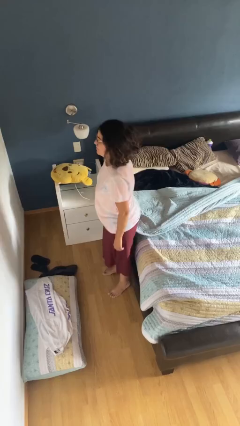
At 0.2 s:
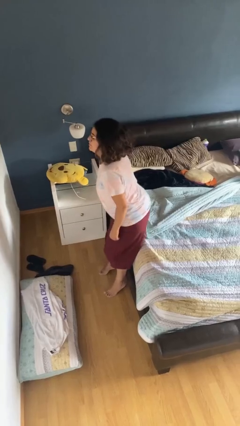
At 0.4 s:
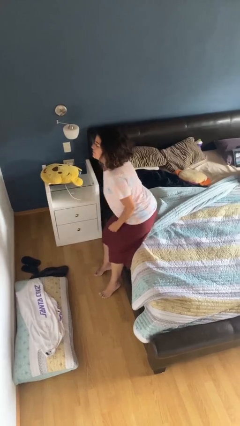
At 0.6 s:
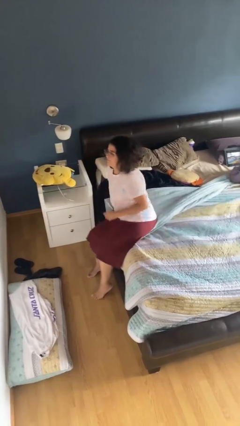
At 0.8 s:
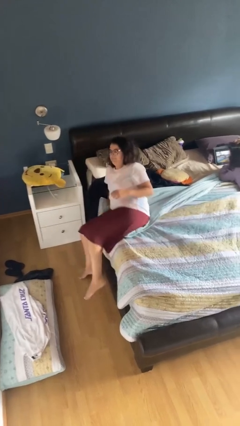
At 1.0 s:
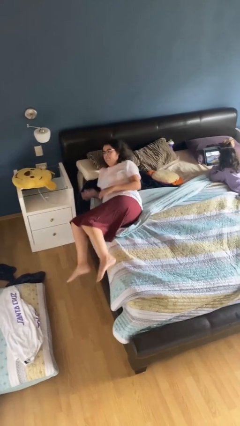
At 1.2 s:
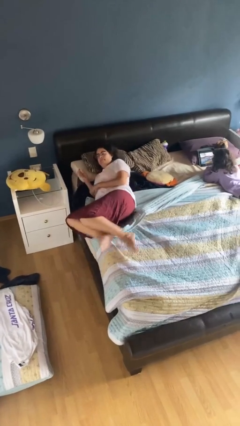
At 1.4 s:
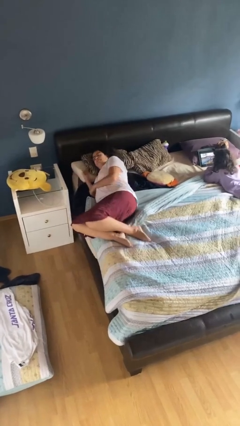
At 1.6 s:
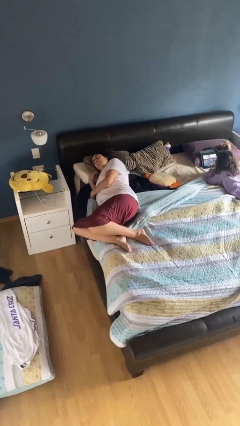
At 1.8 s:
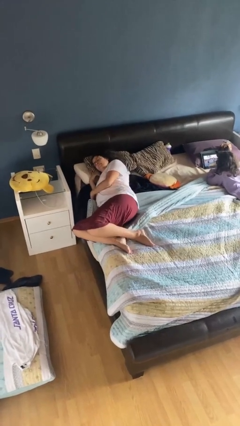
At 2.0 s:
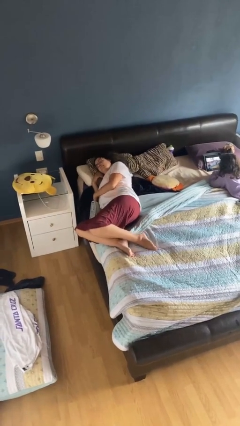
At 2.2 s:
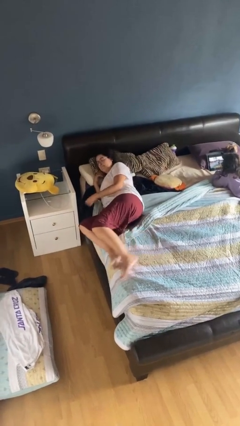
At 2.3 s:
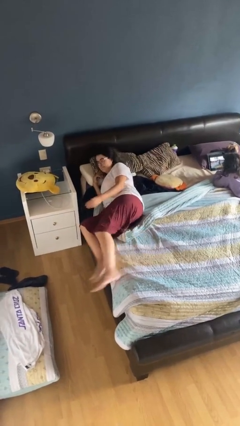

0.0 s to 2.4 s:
person lies down on bed

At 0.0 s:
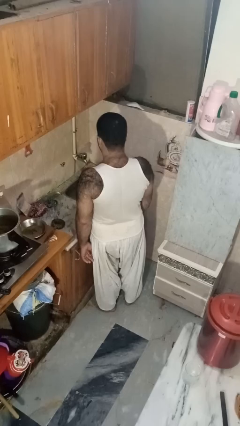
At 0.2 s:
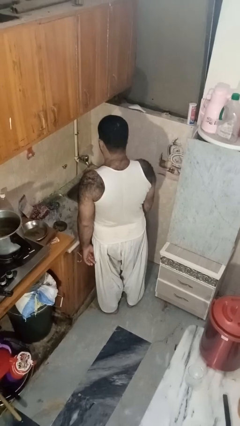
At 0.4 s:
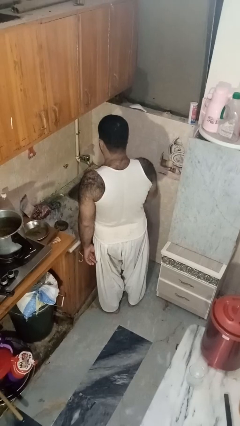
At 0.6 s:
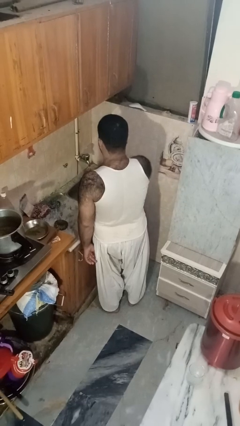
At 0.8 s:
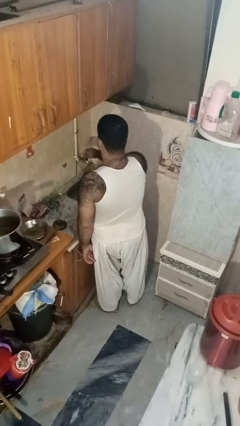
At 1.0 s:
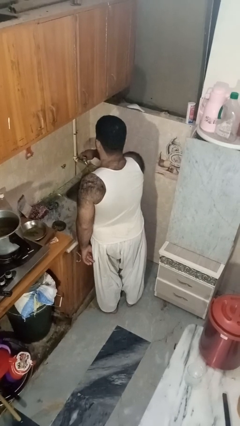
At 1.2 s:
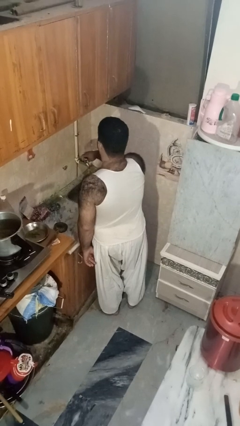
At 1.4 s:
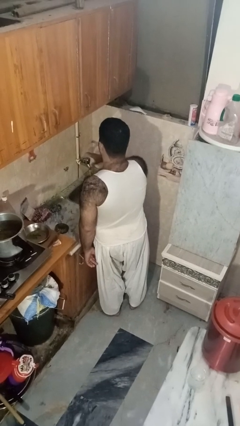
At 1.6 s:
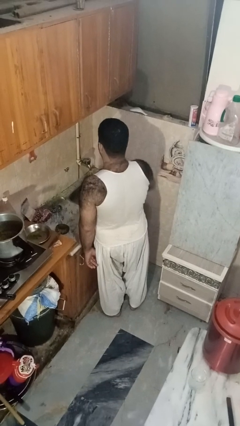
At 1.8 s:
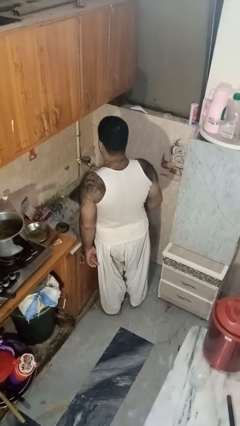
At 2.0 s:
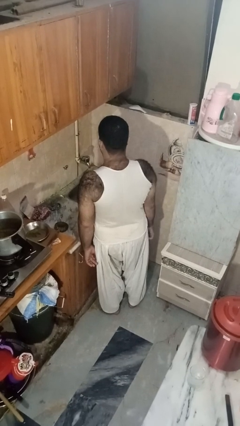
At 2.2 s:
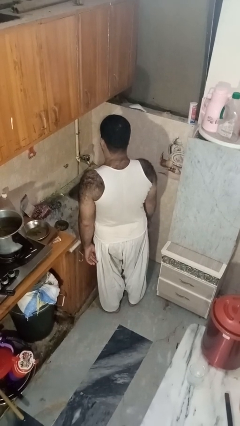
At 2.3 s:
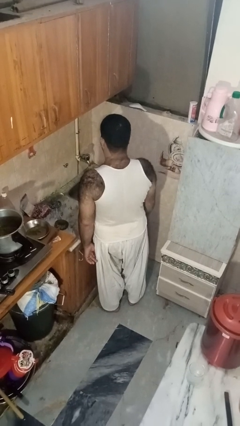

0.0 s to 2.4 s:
person turns on faucet

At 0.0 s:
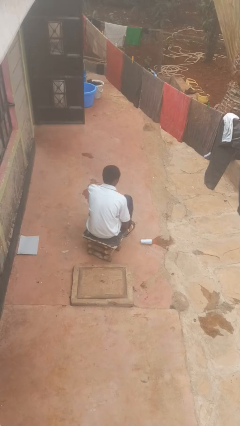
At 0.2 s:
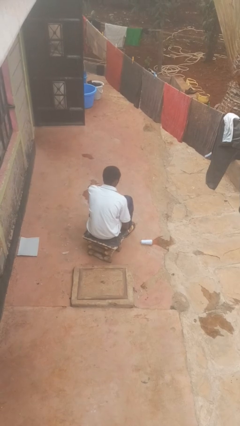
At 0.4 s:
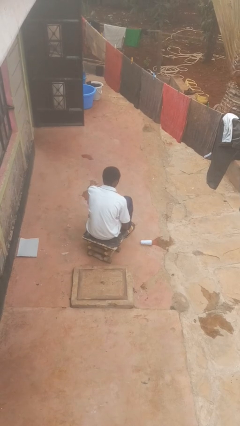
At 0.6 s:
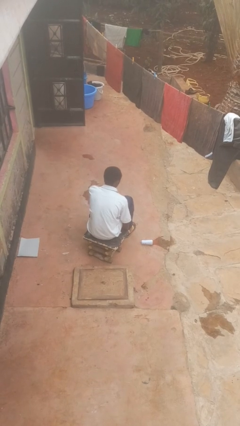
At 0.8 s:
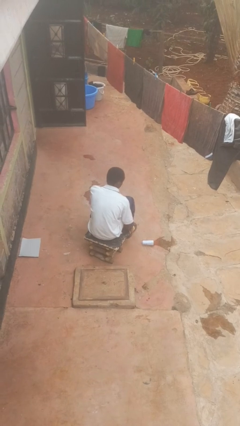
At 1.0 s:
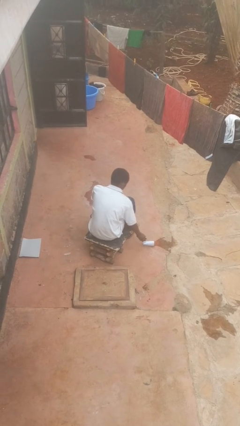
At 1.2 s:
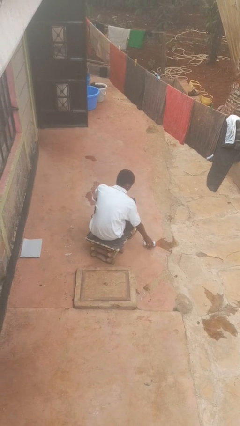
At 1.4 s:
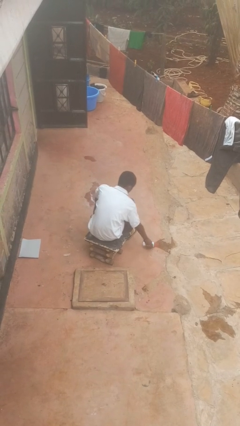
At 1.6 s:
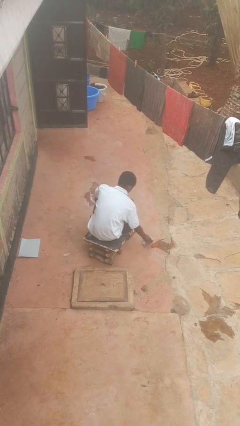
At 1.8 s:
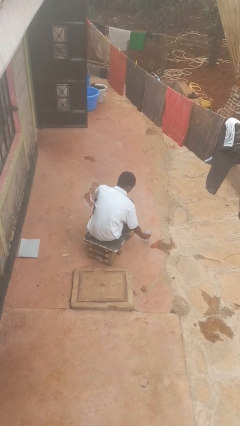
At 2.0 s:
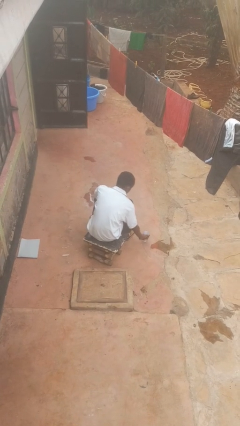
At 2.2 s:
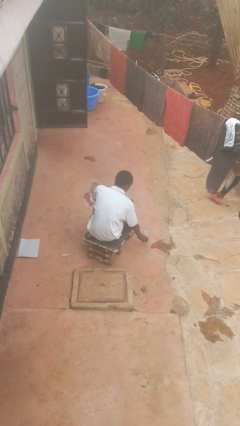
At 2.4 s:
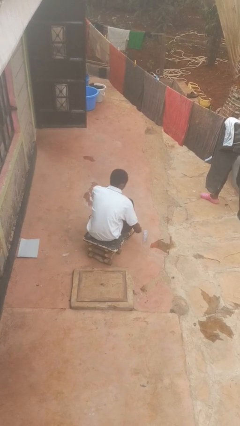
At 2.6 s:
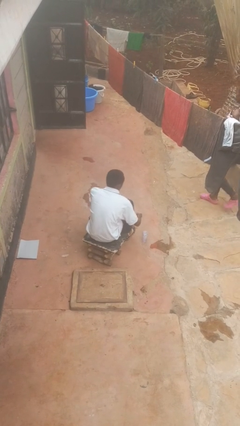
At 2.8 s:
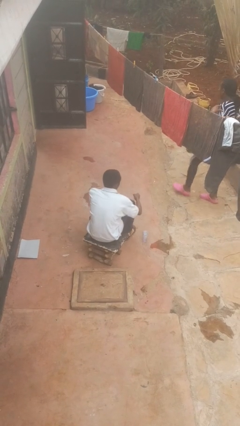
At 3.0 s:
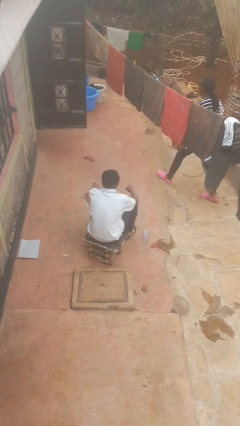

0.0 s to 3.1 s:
person sets upright glass

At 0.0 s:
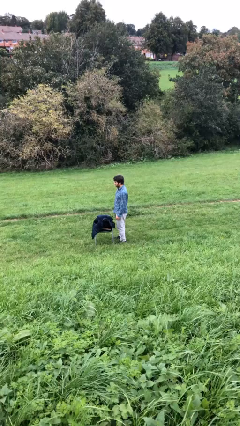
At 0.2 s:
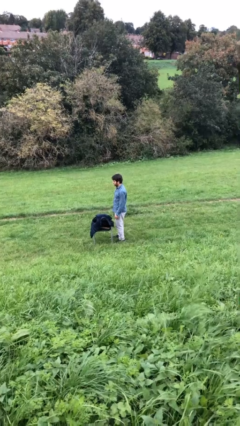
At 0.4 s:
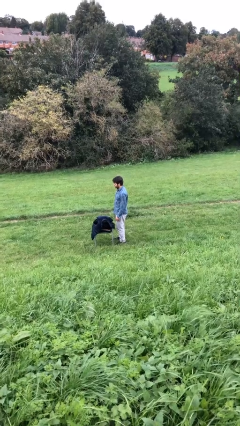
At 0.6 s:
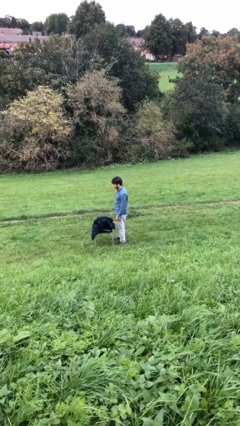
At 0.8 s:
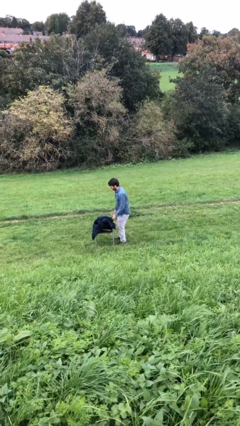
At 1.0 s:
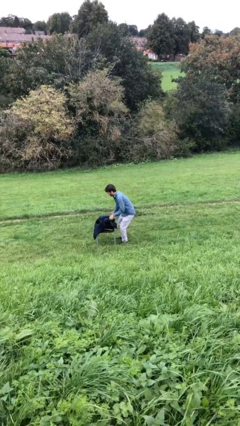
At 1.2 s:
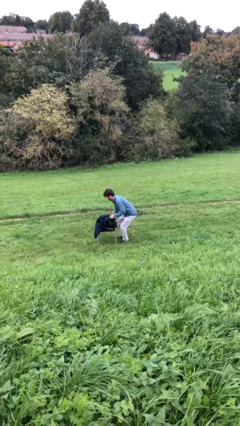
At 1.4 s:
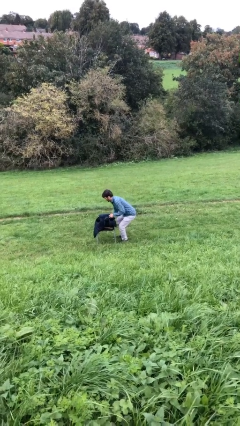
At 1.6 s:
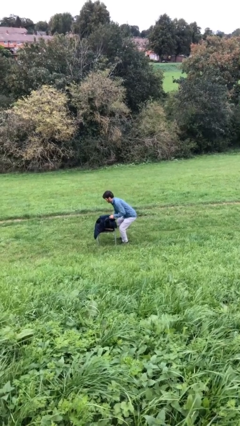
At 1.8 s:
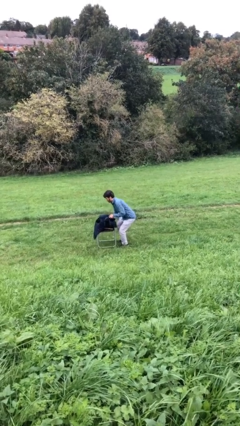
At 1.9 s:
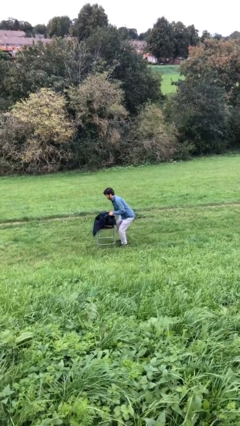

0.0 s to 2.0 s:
person picks up object from floor

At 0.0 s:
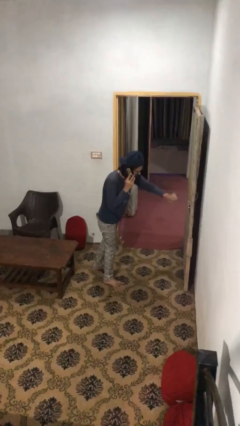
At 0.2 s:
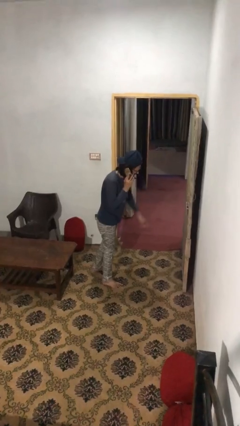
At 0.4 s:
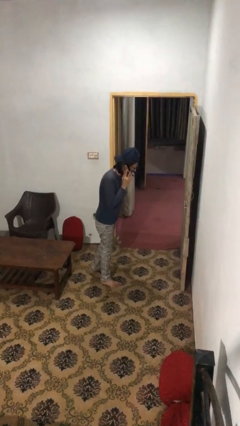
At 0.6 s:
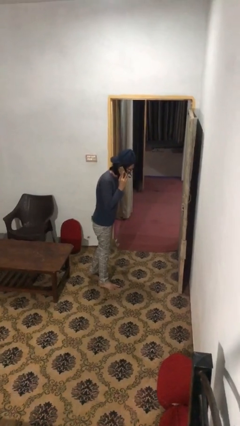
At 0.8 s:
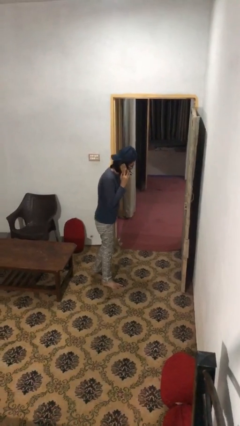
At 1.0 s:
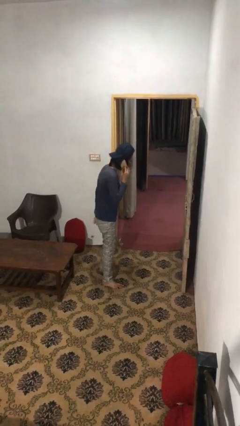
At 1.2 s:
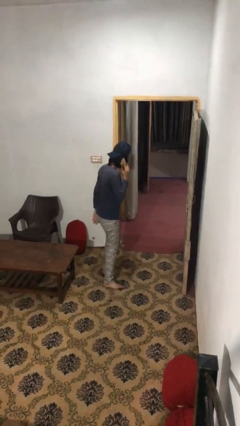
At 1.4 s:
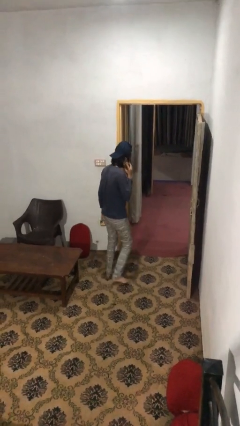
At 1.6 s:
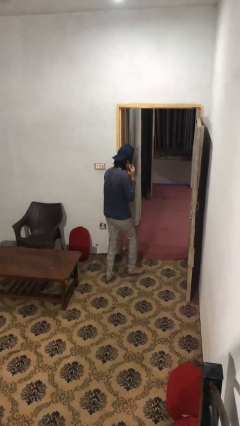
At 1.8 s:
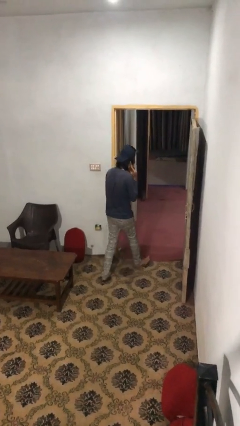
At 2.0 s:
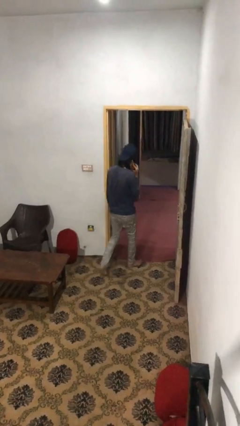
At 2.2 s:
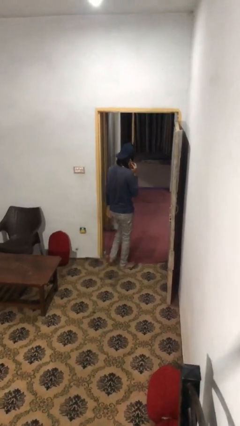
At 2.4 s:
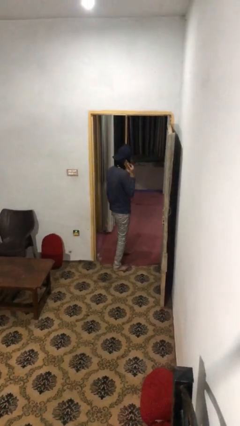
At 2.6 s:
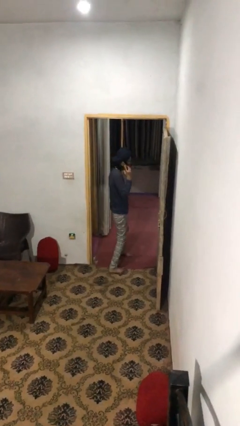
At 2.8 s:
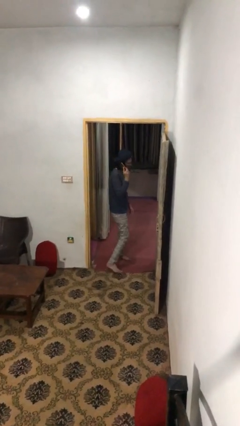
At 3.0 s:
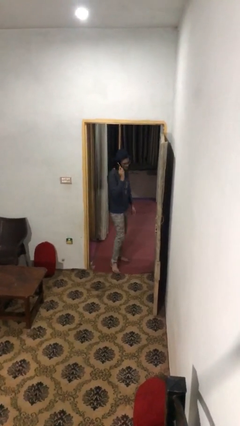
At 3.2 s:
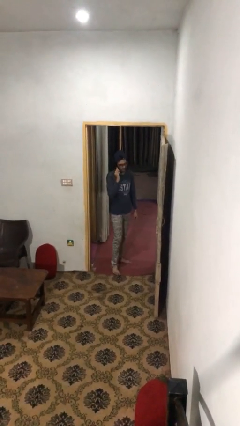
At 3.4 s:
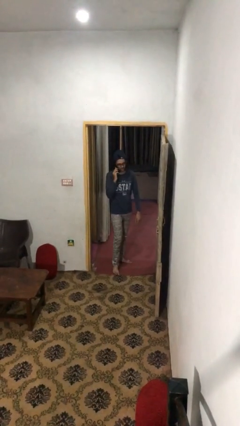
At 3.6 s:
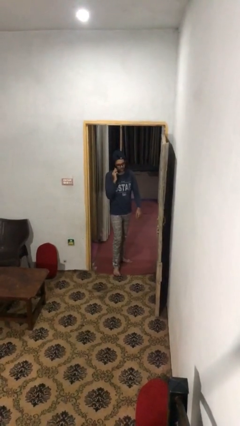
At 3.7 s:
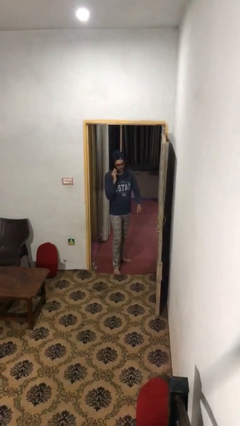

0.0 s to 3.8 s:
person exits scene through structure

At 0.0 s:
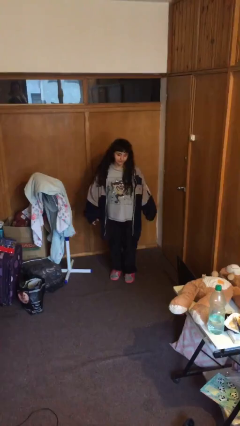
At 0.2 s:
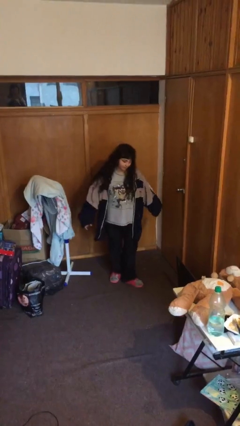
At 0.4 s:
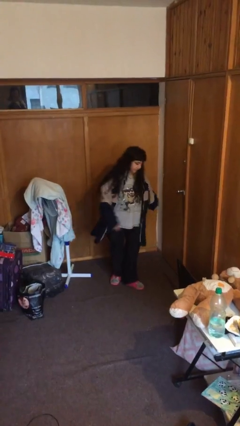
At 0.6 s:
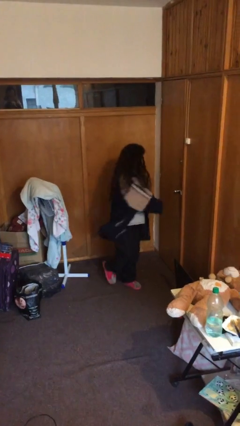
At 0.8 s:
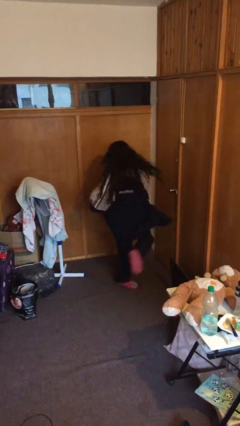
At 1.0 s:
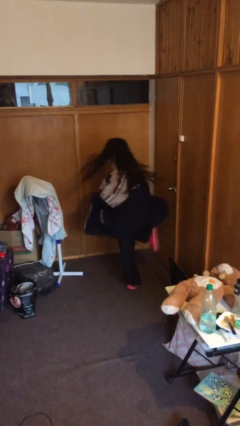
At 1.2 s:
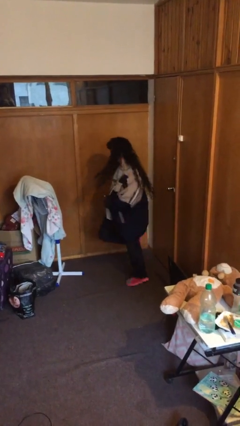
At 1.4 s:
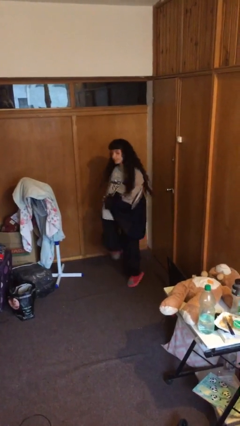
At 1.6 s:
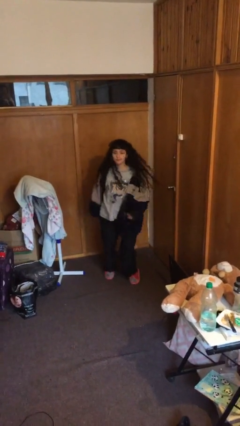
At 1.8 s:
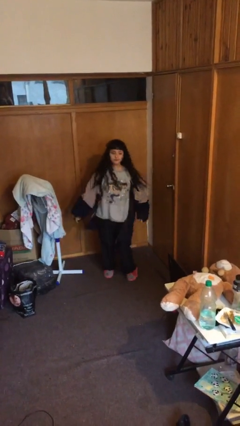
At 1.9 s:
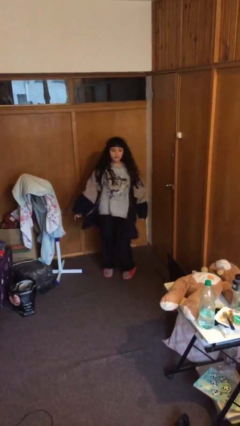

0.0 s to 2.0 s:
person twirls

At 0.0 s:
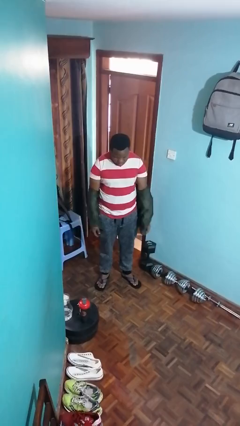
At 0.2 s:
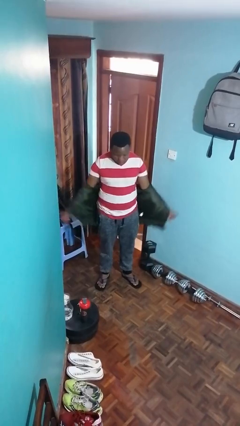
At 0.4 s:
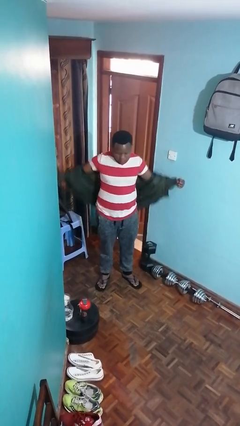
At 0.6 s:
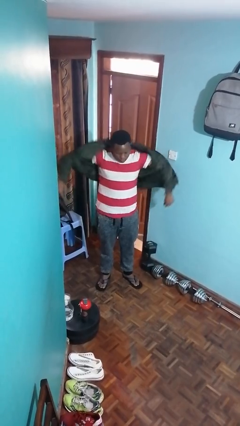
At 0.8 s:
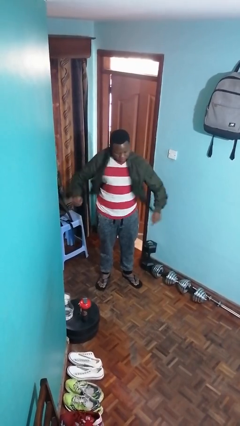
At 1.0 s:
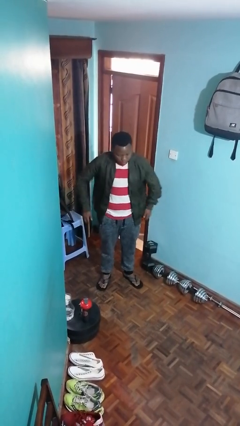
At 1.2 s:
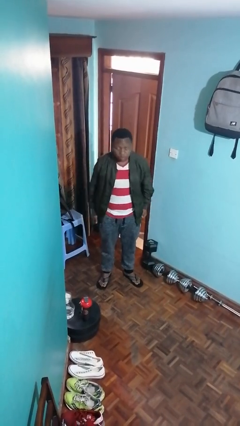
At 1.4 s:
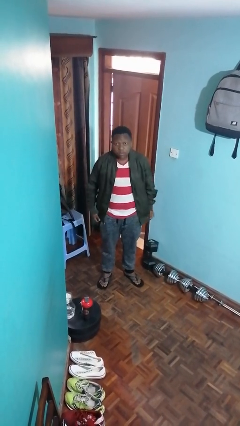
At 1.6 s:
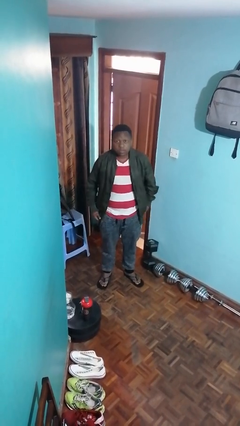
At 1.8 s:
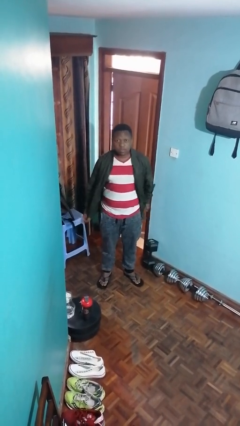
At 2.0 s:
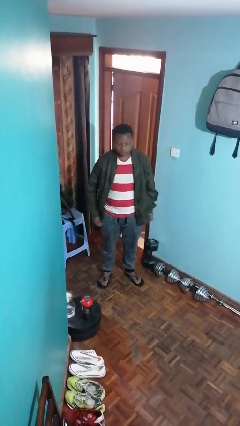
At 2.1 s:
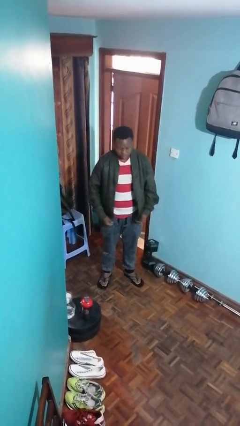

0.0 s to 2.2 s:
person puts on jacket
